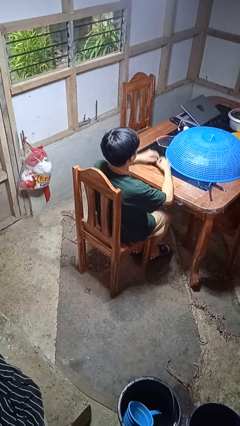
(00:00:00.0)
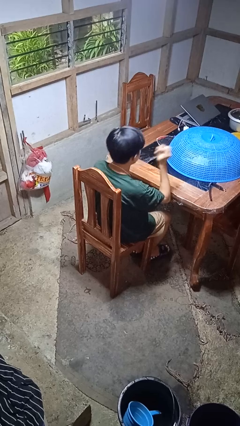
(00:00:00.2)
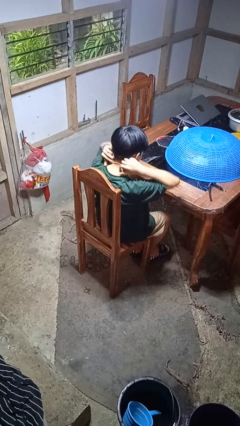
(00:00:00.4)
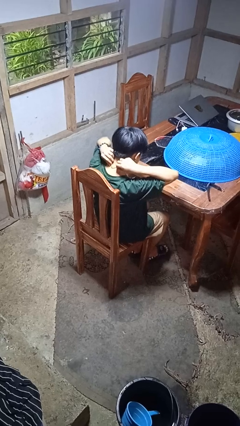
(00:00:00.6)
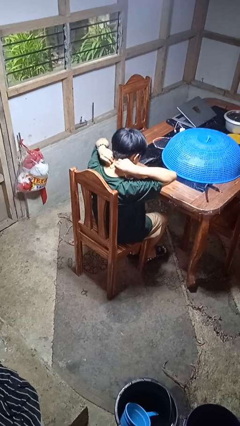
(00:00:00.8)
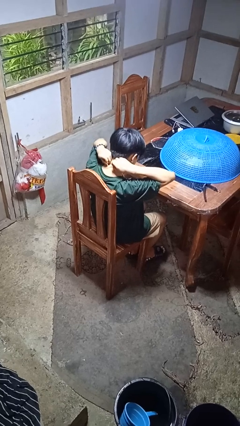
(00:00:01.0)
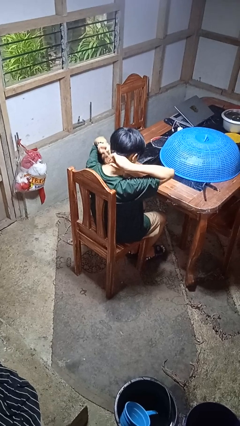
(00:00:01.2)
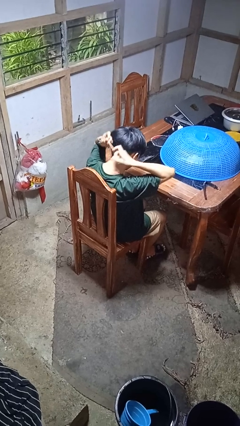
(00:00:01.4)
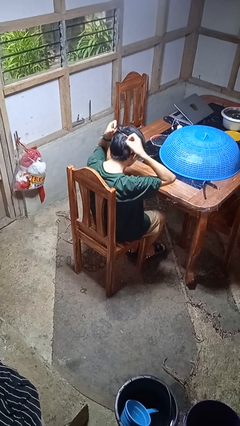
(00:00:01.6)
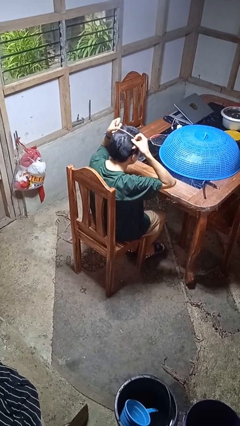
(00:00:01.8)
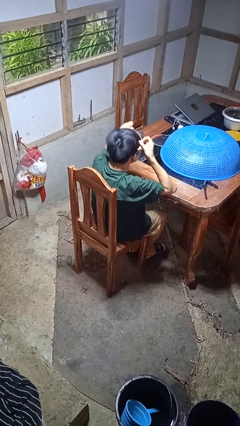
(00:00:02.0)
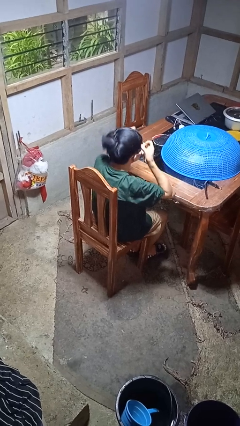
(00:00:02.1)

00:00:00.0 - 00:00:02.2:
person takes off necklace

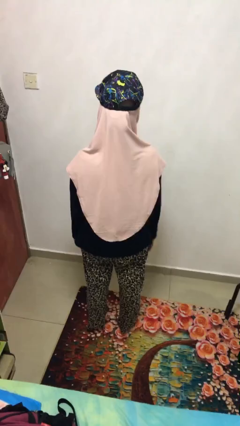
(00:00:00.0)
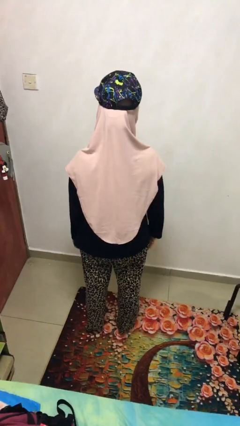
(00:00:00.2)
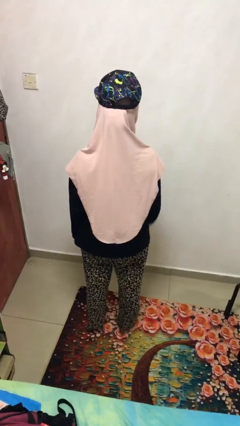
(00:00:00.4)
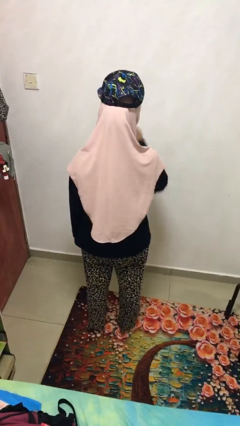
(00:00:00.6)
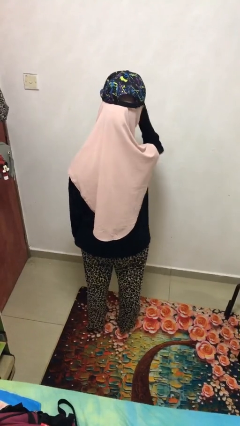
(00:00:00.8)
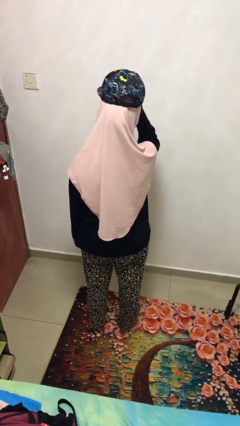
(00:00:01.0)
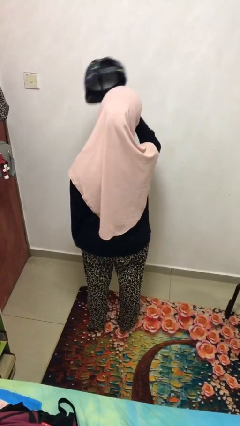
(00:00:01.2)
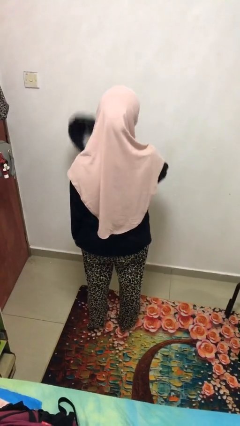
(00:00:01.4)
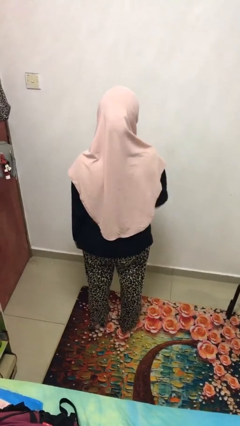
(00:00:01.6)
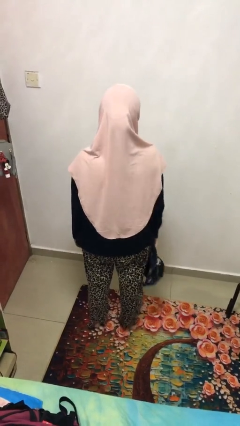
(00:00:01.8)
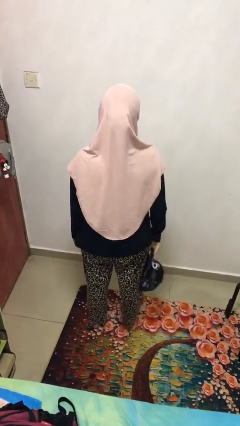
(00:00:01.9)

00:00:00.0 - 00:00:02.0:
person takes off hat

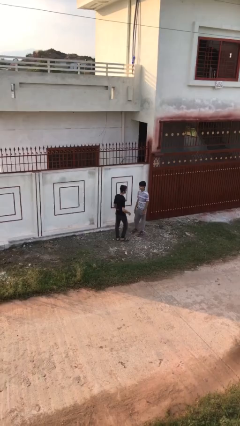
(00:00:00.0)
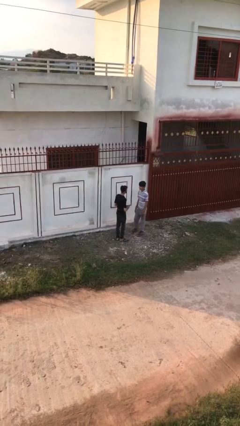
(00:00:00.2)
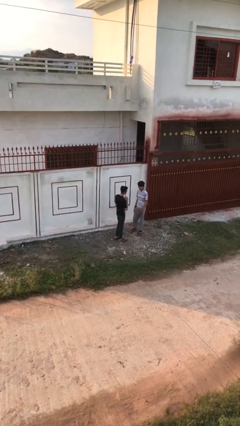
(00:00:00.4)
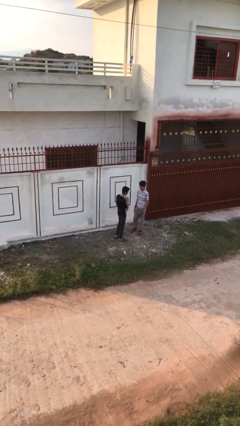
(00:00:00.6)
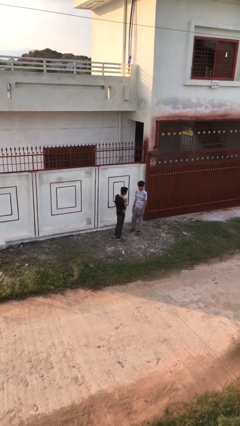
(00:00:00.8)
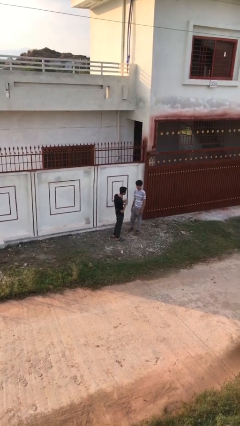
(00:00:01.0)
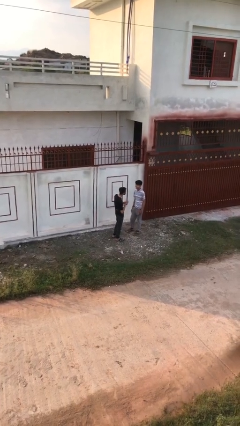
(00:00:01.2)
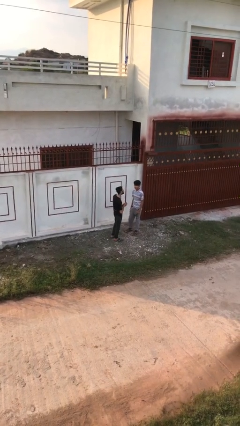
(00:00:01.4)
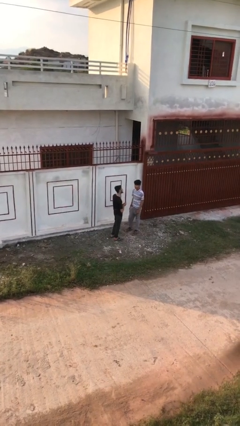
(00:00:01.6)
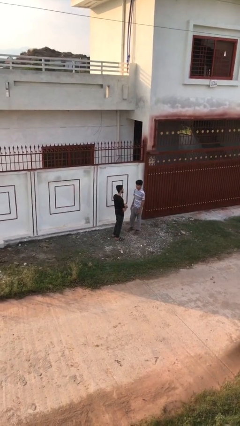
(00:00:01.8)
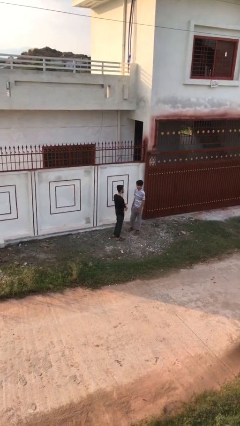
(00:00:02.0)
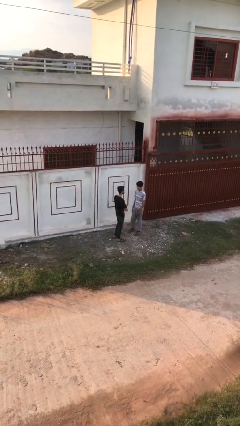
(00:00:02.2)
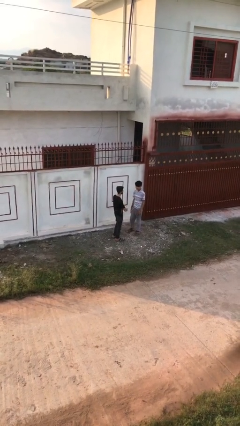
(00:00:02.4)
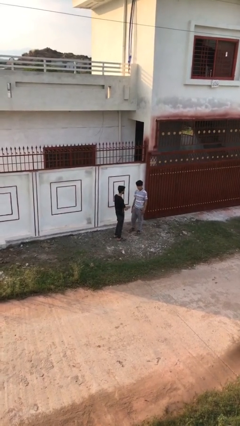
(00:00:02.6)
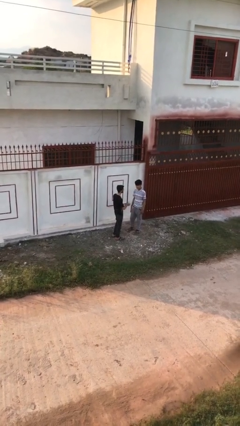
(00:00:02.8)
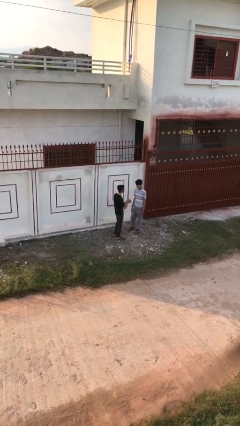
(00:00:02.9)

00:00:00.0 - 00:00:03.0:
person talks to person

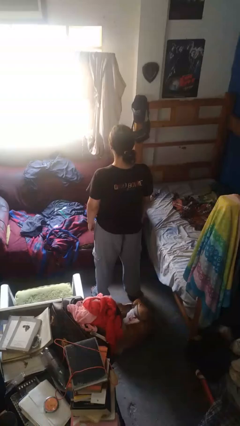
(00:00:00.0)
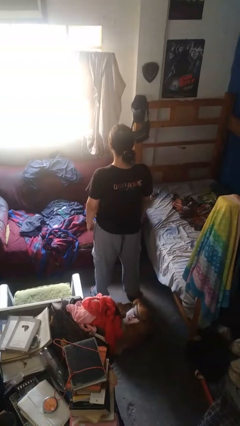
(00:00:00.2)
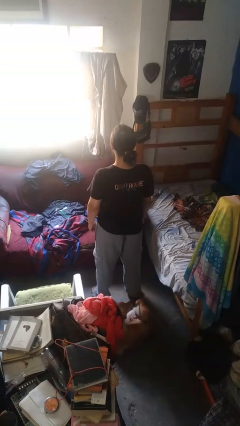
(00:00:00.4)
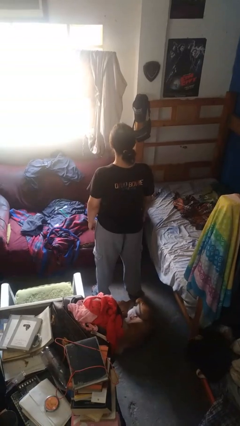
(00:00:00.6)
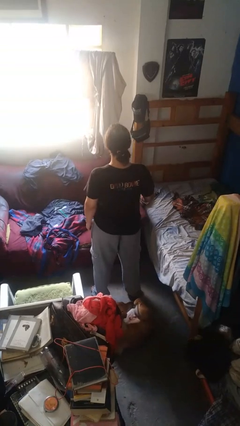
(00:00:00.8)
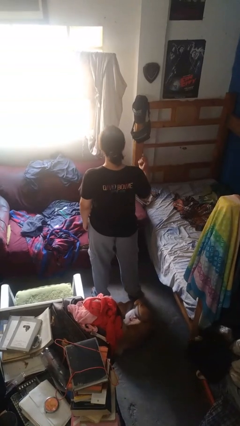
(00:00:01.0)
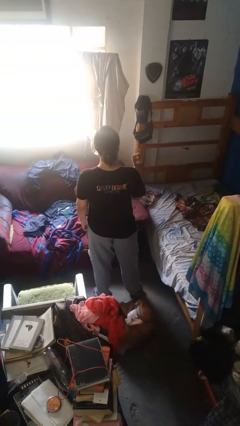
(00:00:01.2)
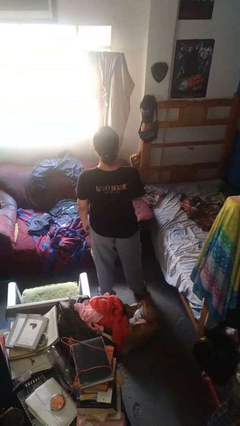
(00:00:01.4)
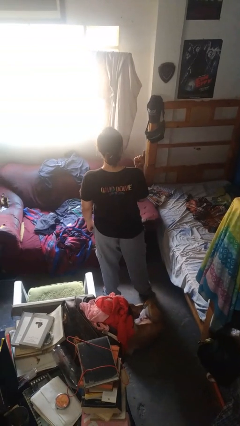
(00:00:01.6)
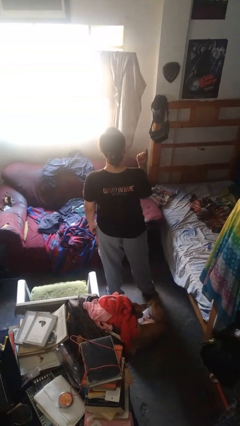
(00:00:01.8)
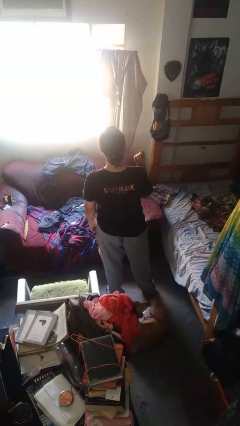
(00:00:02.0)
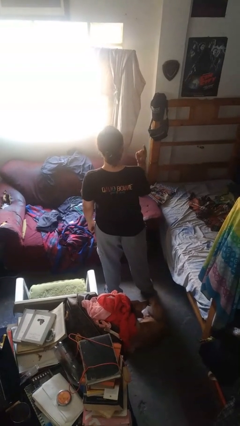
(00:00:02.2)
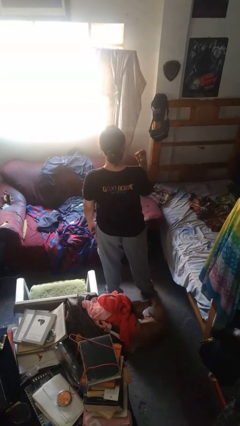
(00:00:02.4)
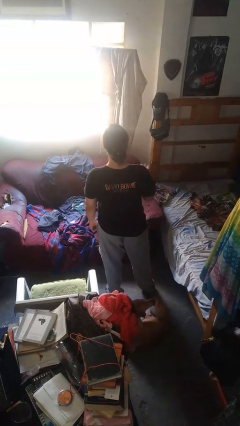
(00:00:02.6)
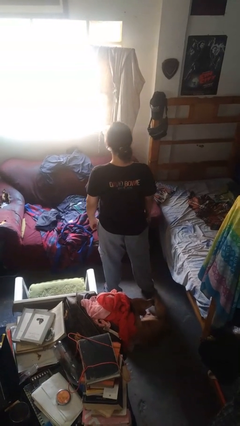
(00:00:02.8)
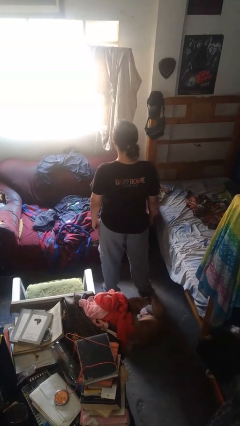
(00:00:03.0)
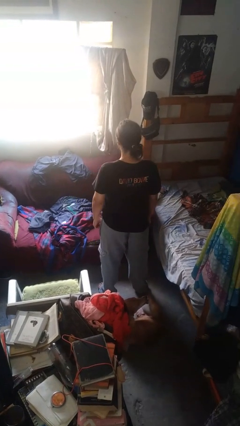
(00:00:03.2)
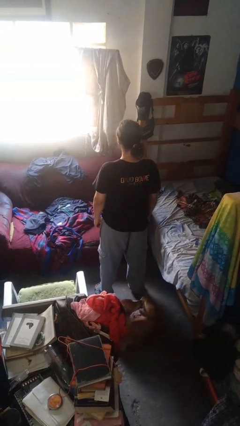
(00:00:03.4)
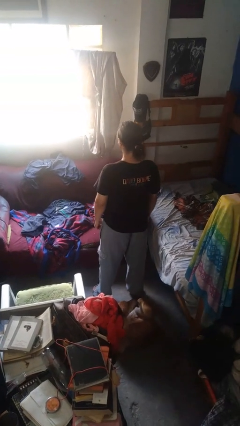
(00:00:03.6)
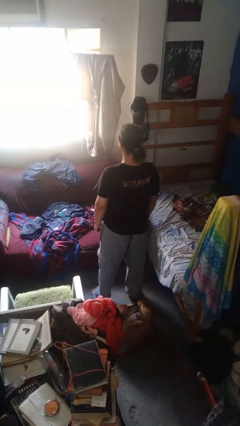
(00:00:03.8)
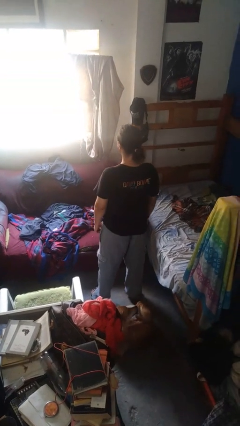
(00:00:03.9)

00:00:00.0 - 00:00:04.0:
person gestures number one

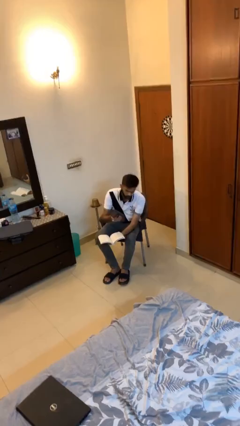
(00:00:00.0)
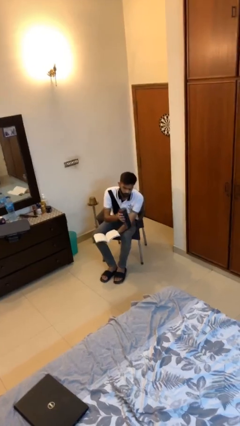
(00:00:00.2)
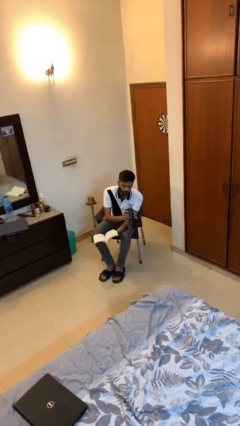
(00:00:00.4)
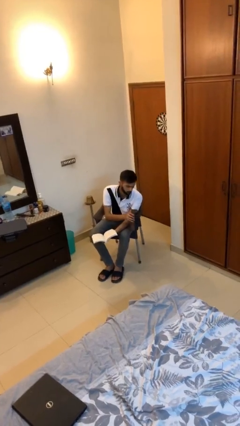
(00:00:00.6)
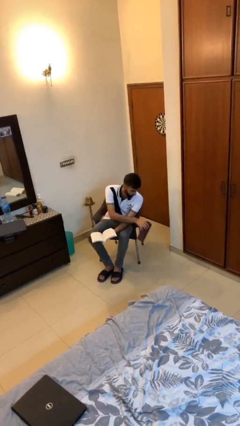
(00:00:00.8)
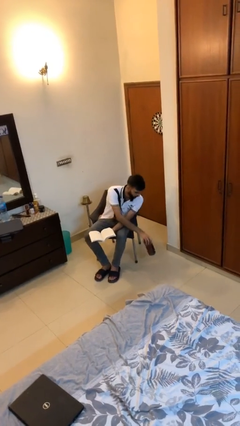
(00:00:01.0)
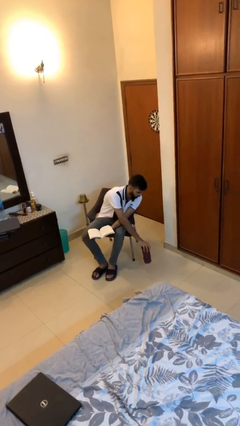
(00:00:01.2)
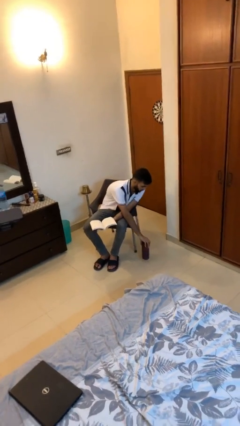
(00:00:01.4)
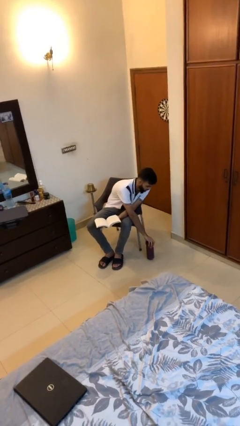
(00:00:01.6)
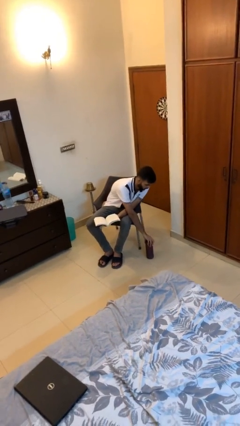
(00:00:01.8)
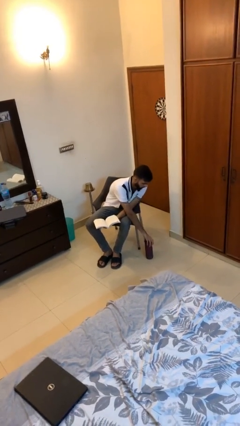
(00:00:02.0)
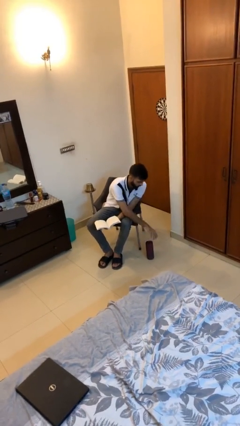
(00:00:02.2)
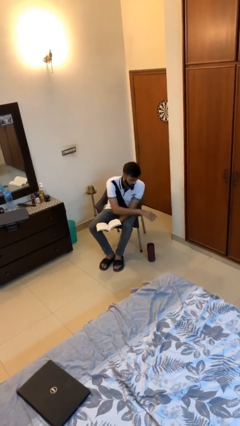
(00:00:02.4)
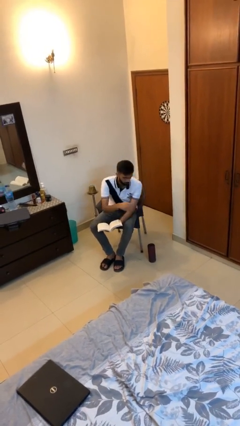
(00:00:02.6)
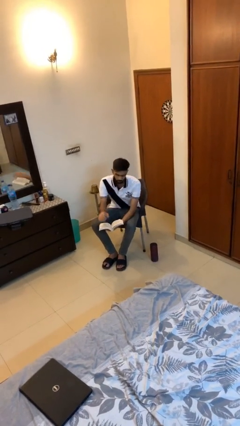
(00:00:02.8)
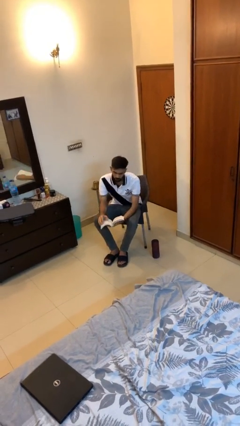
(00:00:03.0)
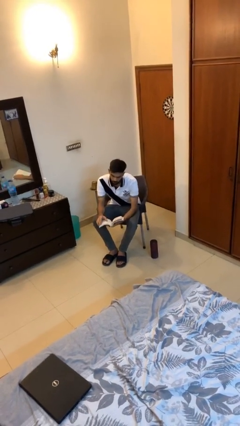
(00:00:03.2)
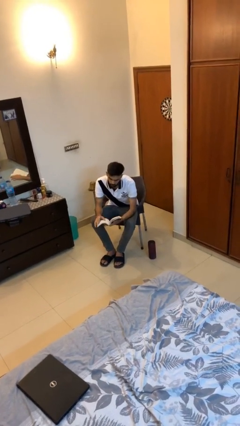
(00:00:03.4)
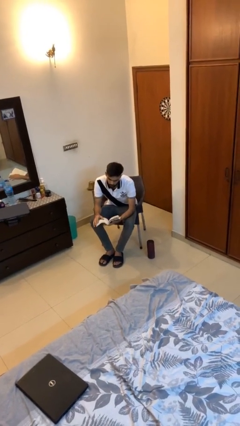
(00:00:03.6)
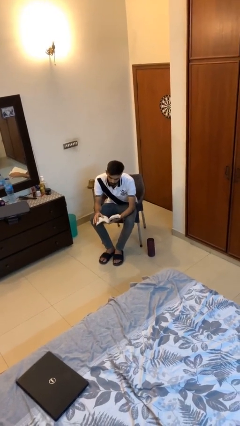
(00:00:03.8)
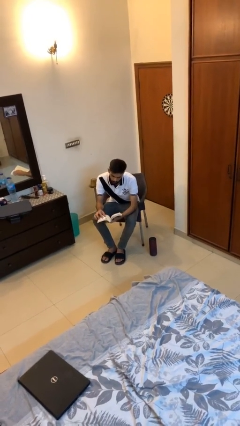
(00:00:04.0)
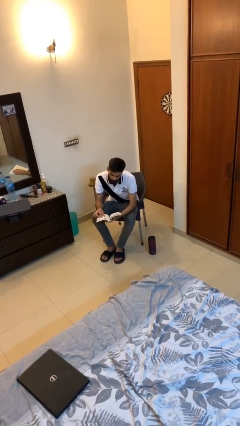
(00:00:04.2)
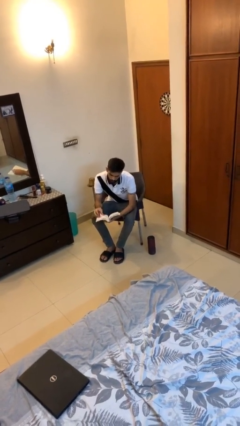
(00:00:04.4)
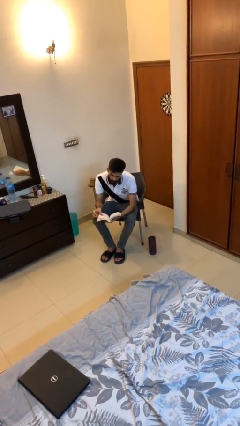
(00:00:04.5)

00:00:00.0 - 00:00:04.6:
person puts down object on floor

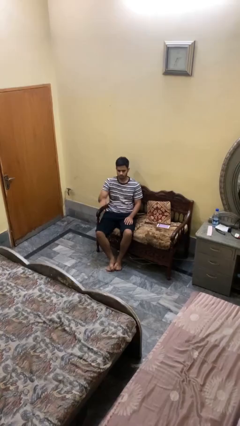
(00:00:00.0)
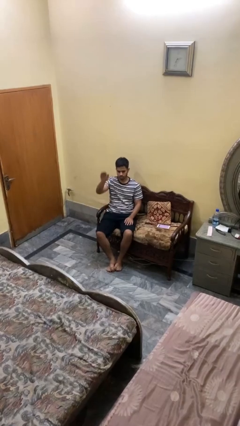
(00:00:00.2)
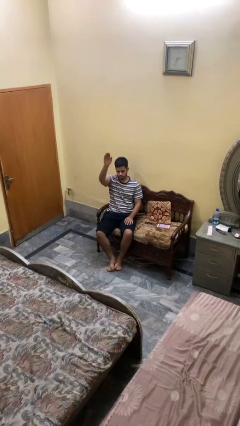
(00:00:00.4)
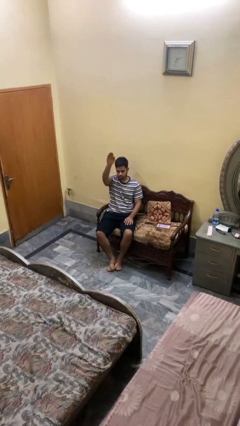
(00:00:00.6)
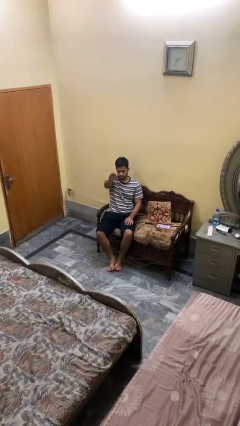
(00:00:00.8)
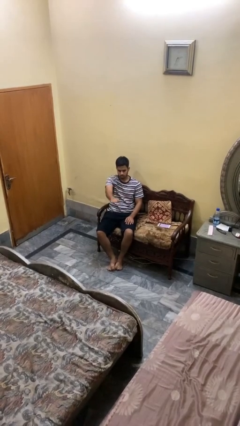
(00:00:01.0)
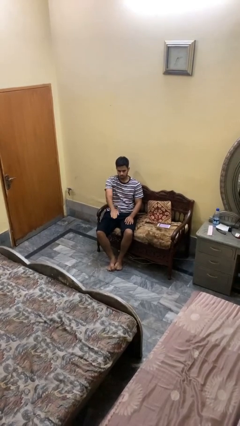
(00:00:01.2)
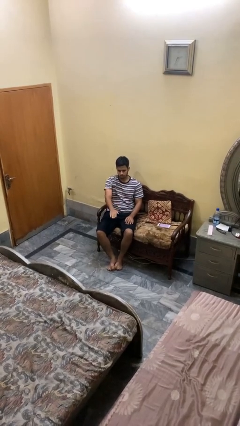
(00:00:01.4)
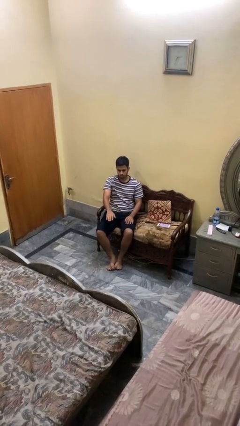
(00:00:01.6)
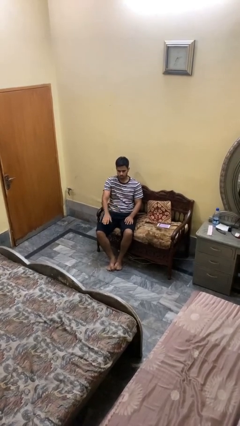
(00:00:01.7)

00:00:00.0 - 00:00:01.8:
person gestures swipe down
